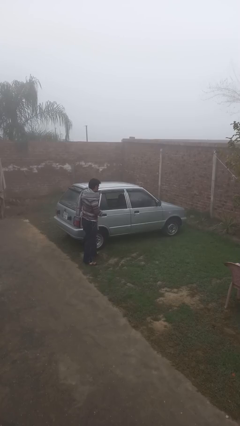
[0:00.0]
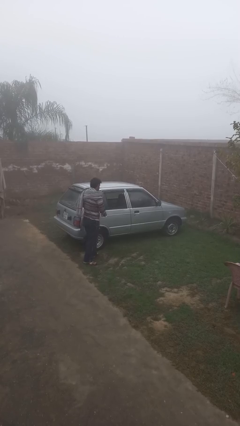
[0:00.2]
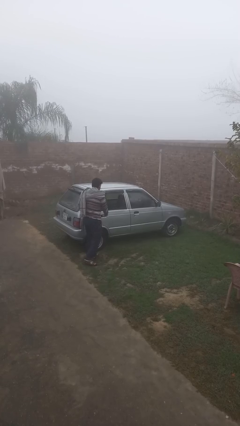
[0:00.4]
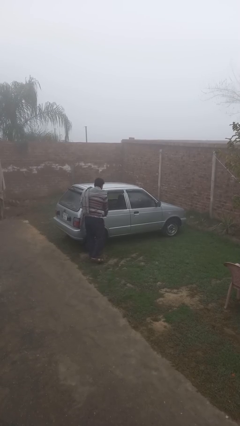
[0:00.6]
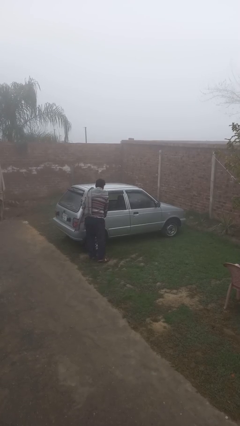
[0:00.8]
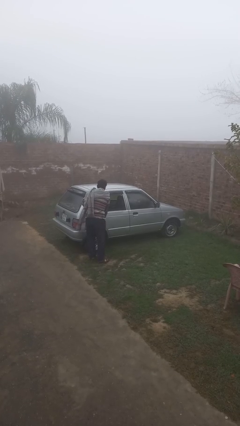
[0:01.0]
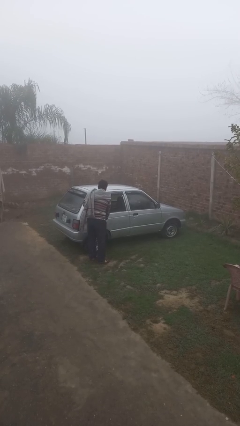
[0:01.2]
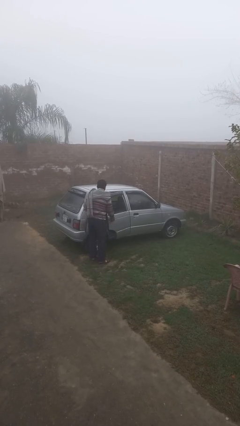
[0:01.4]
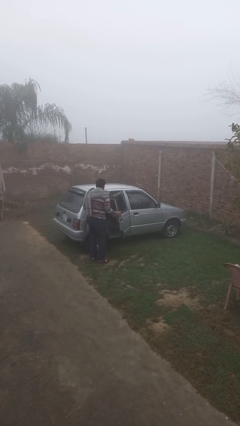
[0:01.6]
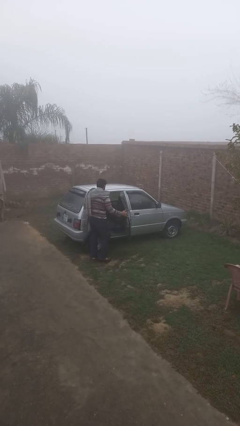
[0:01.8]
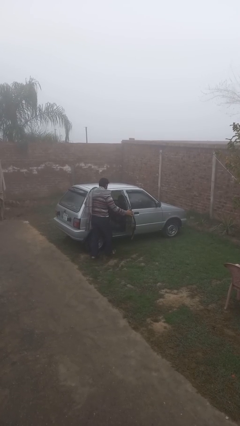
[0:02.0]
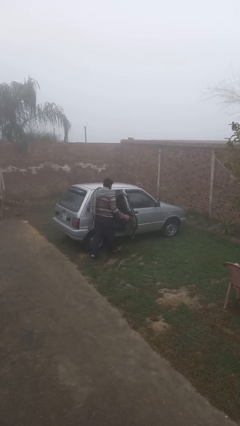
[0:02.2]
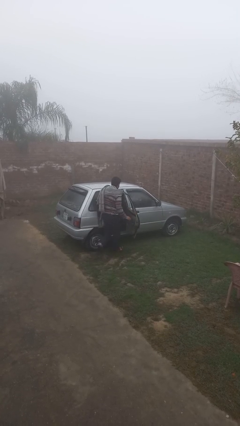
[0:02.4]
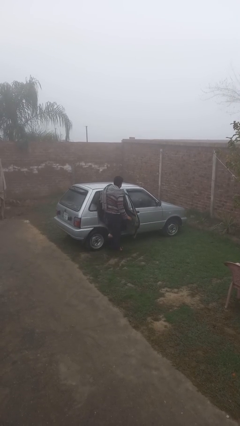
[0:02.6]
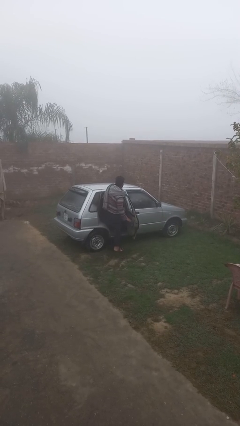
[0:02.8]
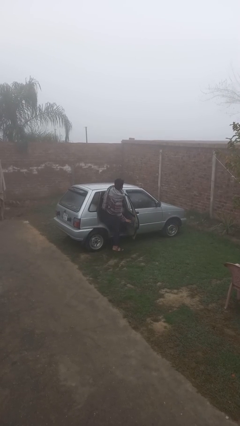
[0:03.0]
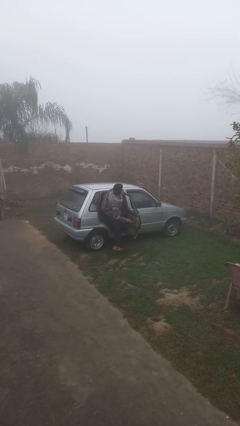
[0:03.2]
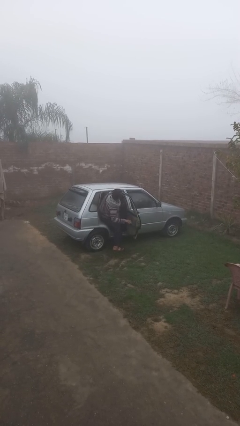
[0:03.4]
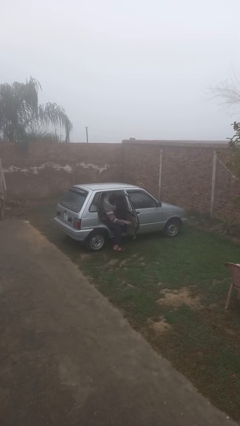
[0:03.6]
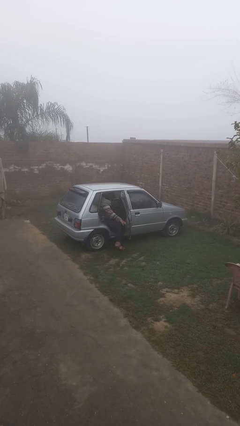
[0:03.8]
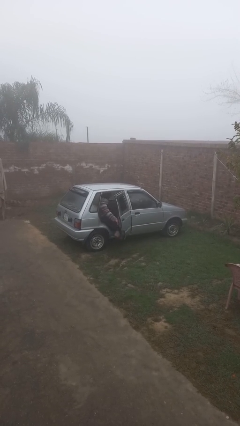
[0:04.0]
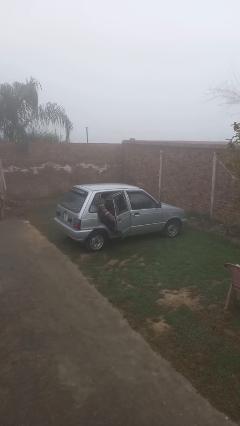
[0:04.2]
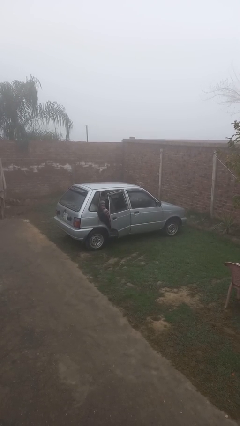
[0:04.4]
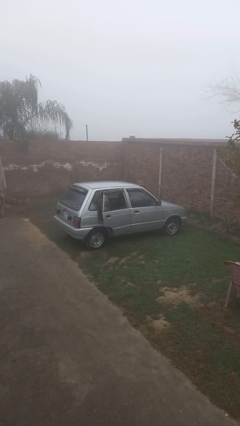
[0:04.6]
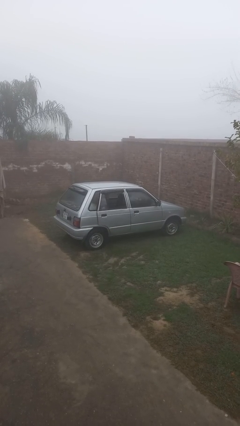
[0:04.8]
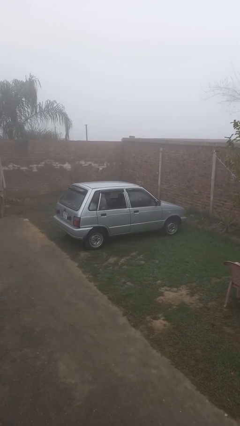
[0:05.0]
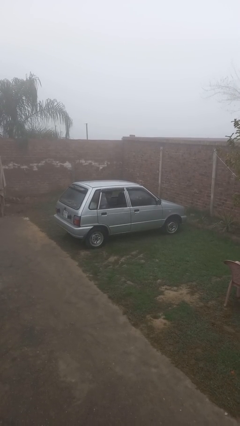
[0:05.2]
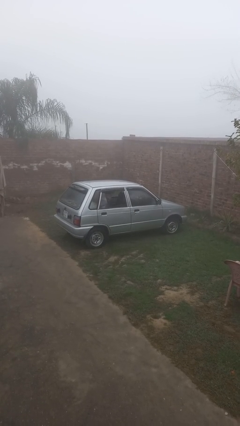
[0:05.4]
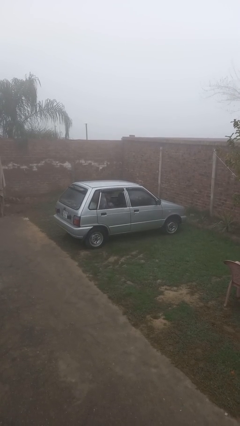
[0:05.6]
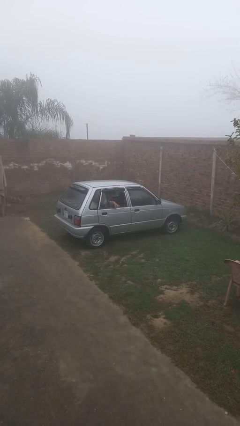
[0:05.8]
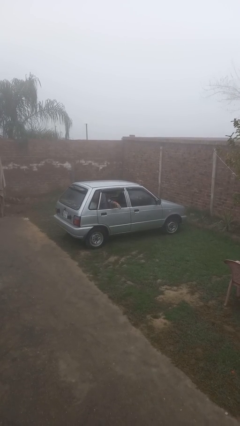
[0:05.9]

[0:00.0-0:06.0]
car picks up person

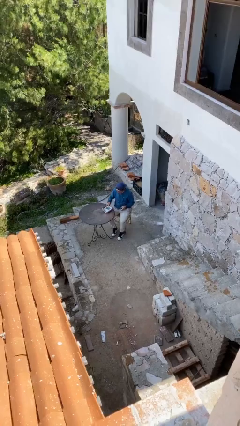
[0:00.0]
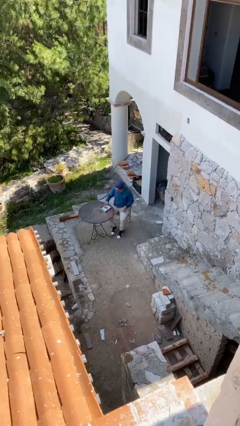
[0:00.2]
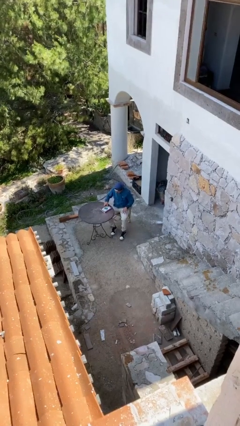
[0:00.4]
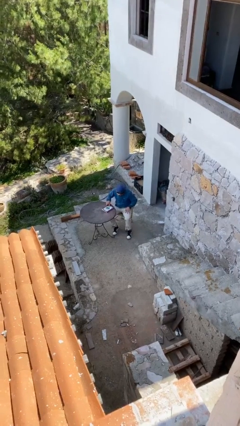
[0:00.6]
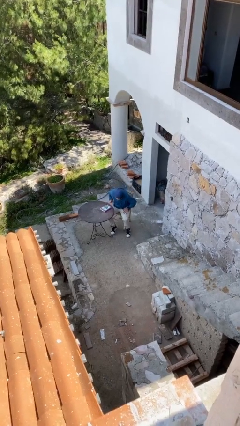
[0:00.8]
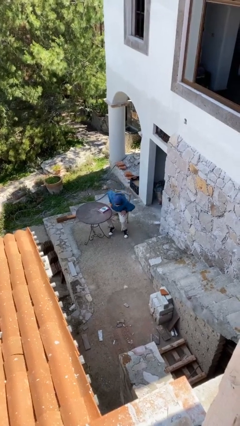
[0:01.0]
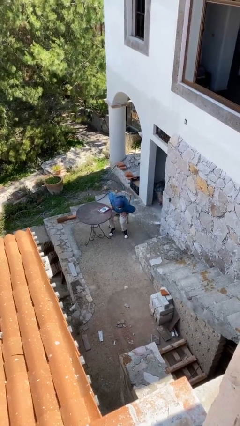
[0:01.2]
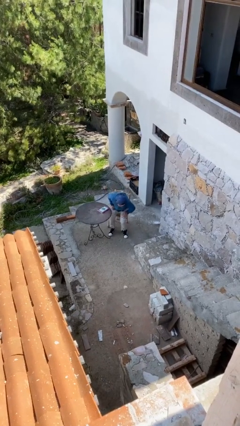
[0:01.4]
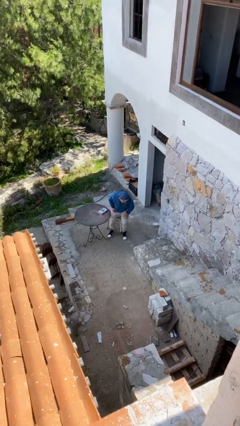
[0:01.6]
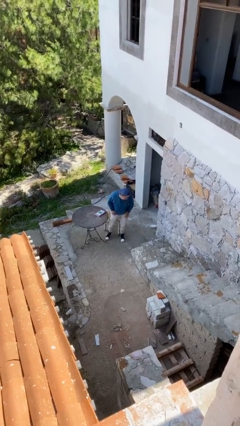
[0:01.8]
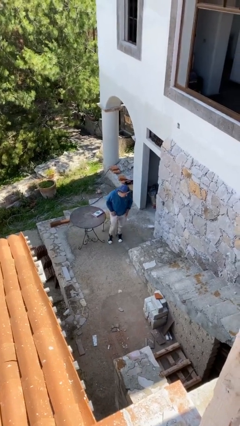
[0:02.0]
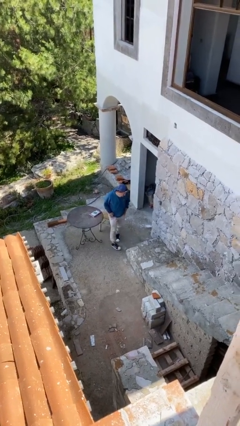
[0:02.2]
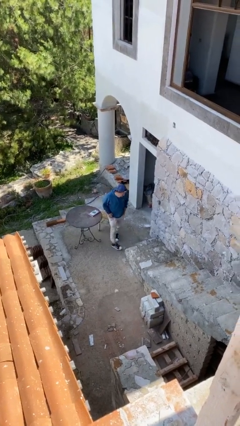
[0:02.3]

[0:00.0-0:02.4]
person stands up

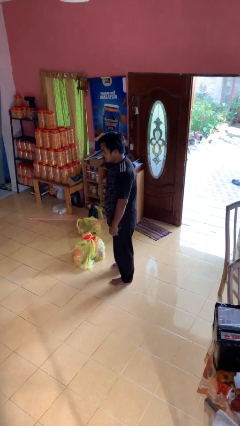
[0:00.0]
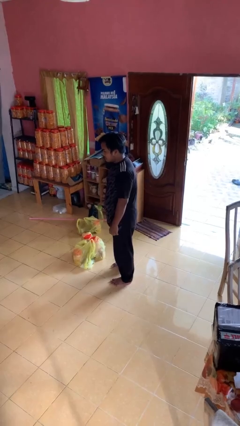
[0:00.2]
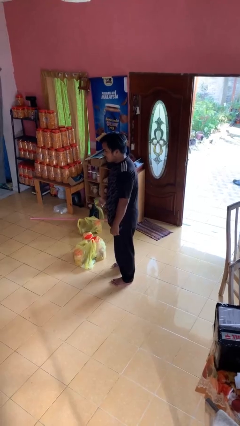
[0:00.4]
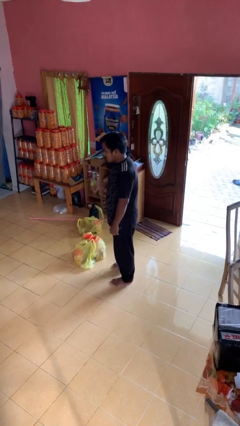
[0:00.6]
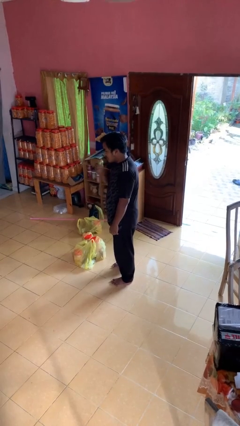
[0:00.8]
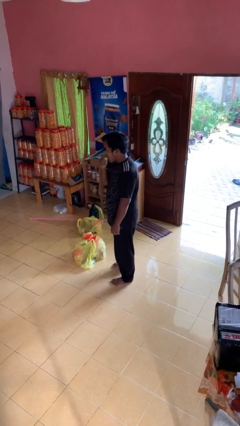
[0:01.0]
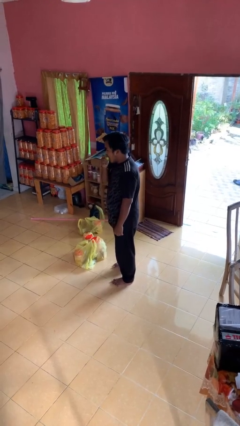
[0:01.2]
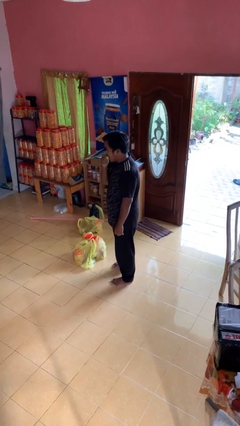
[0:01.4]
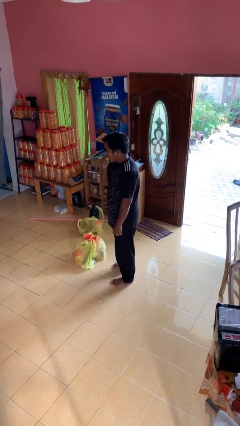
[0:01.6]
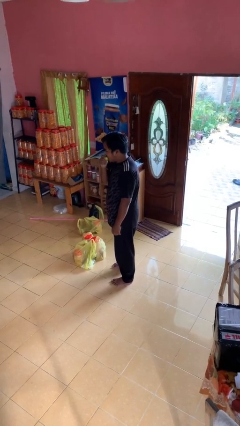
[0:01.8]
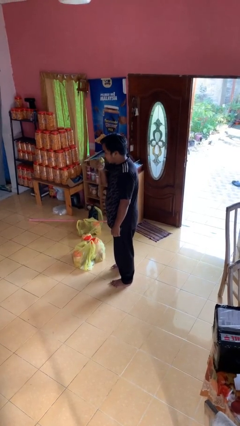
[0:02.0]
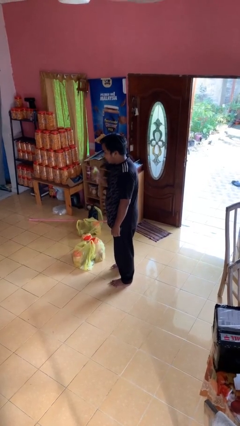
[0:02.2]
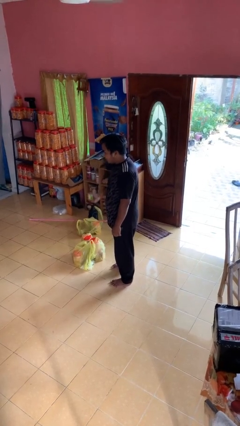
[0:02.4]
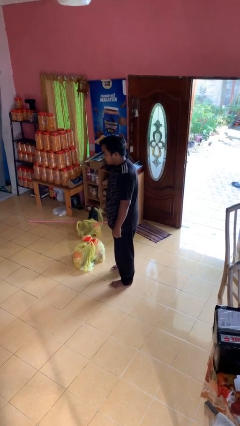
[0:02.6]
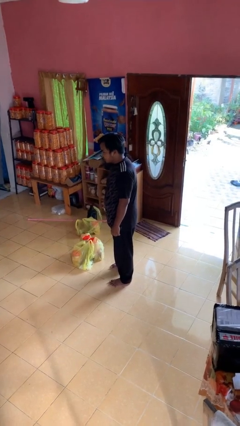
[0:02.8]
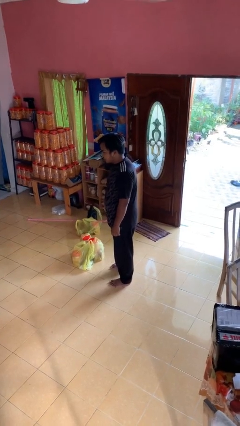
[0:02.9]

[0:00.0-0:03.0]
person eats apple

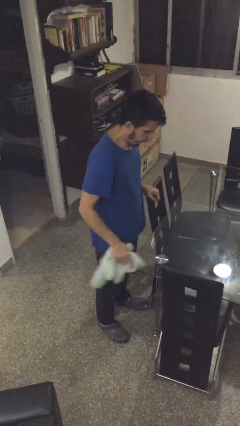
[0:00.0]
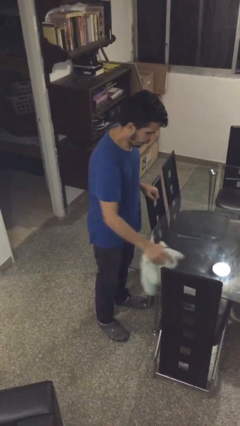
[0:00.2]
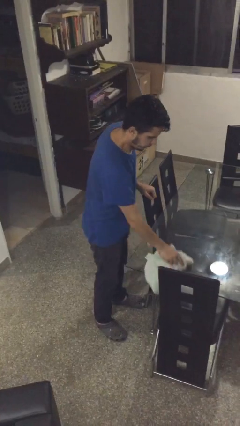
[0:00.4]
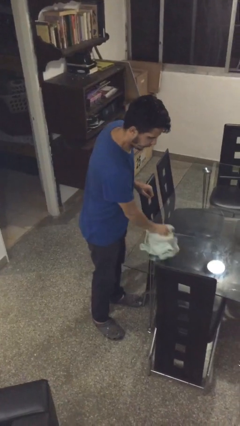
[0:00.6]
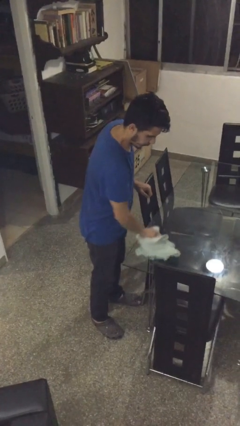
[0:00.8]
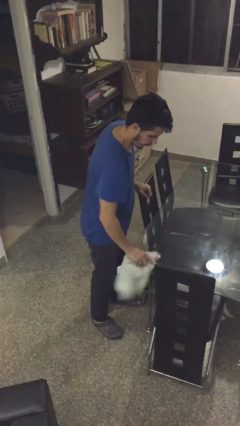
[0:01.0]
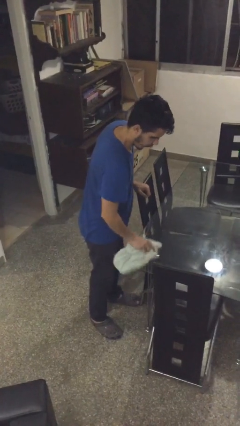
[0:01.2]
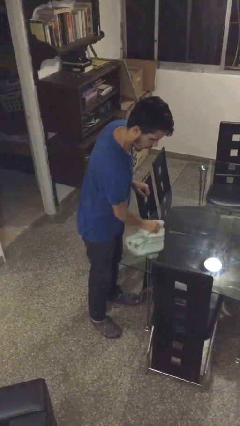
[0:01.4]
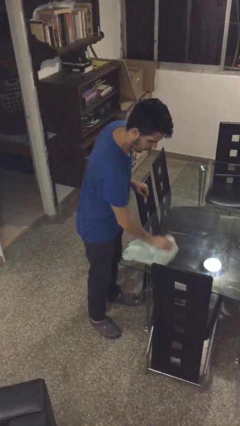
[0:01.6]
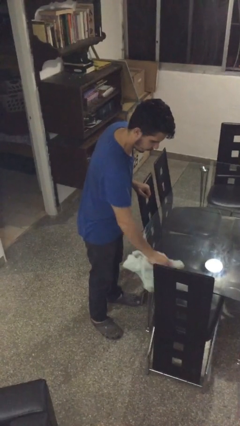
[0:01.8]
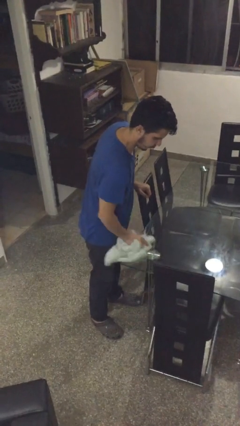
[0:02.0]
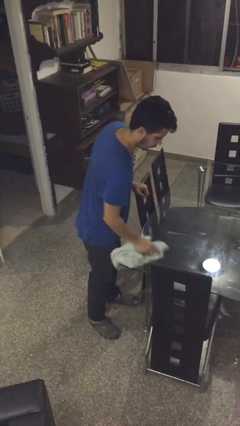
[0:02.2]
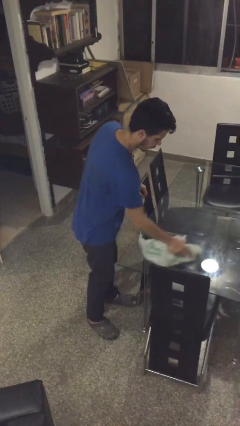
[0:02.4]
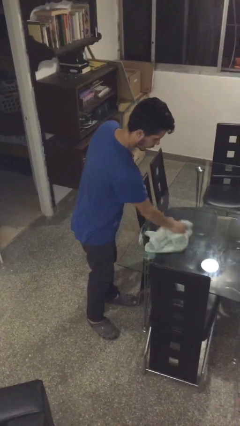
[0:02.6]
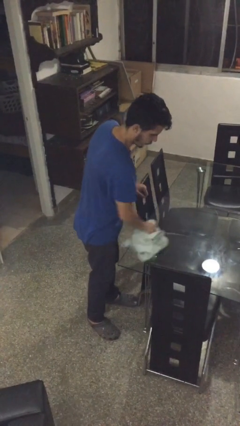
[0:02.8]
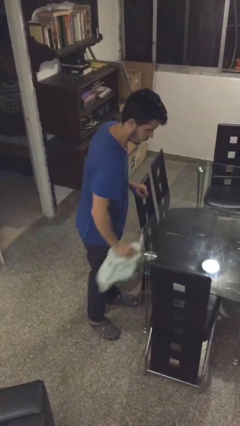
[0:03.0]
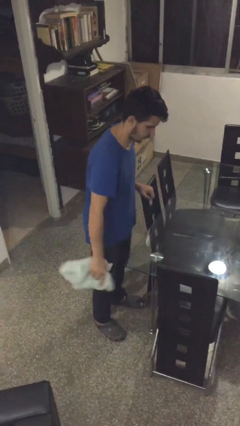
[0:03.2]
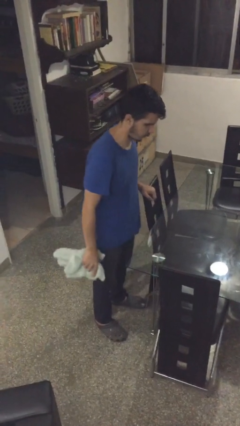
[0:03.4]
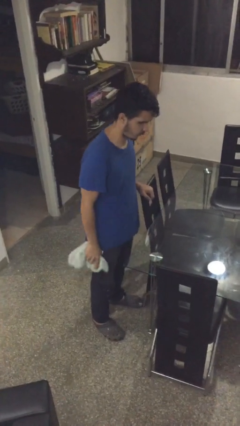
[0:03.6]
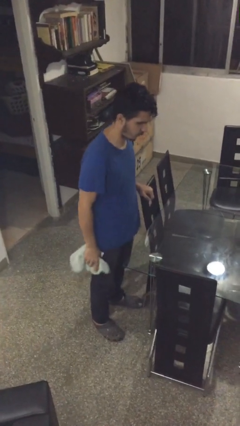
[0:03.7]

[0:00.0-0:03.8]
person cleans table with rag

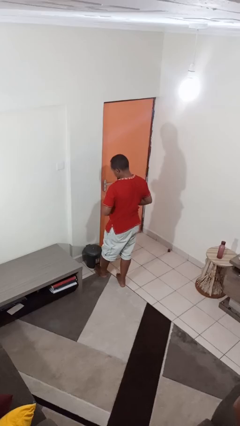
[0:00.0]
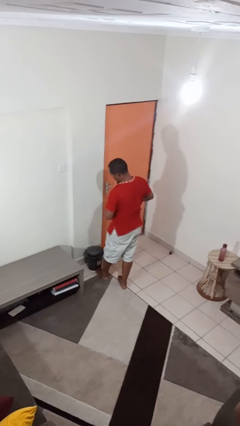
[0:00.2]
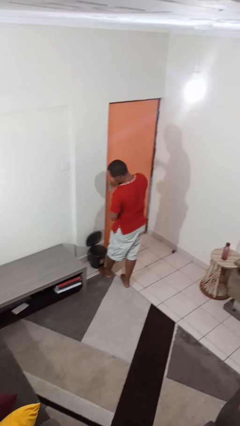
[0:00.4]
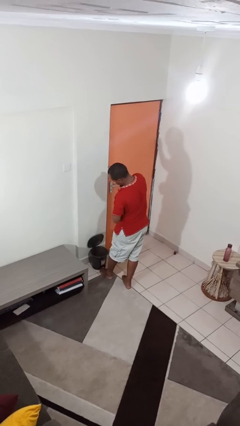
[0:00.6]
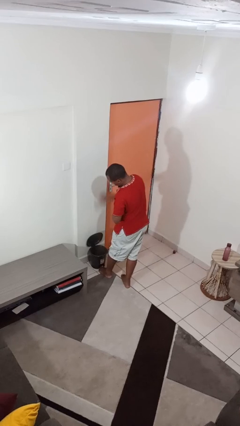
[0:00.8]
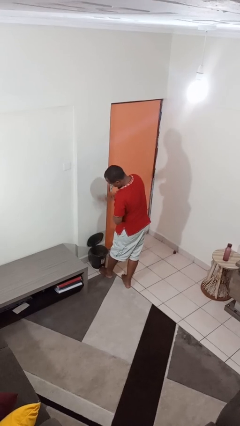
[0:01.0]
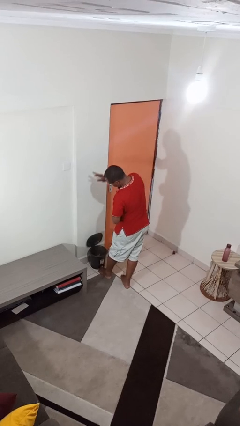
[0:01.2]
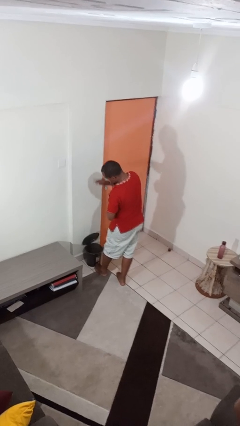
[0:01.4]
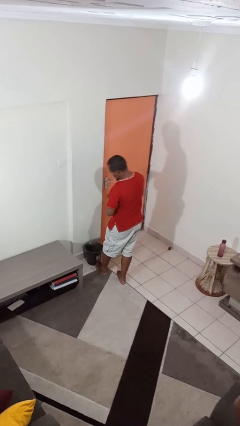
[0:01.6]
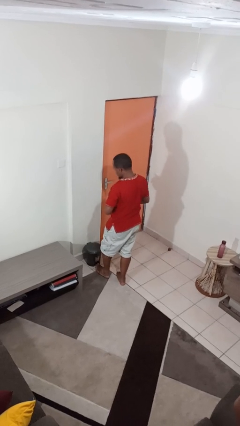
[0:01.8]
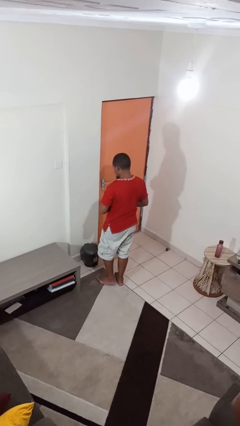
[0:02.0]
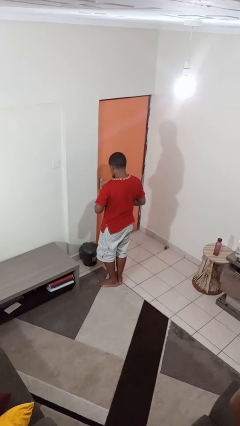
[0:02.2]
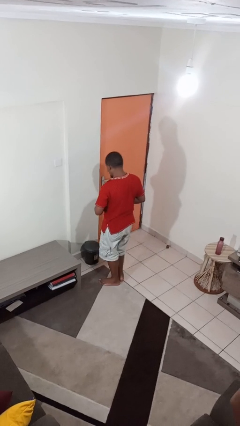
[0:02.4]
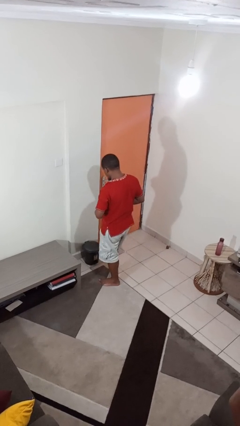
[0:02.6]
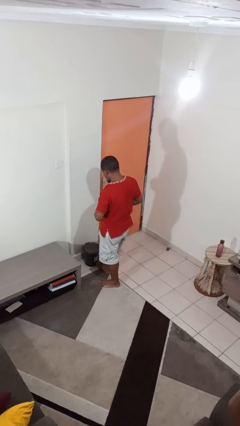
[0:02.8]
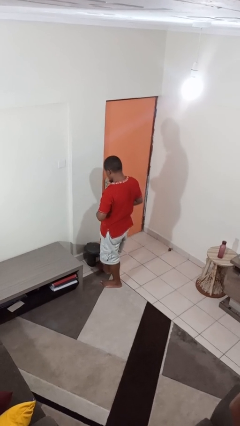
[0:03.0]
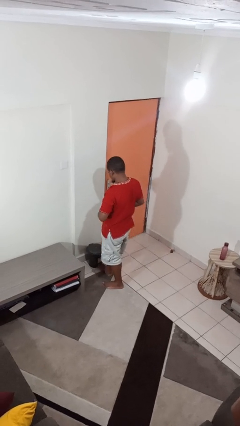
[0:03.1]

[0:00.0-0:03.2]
person discards trash
